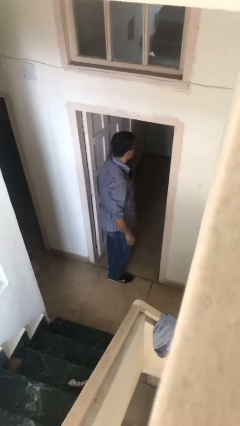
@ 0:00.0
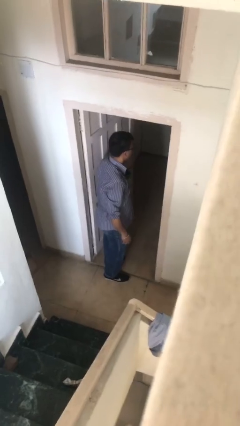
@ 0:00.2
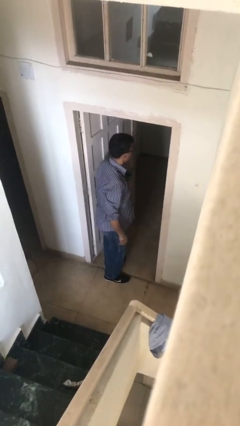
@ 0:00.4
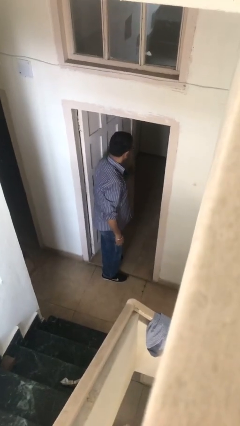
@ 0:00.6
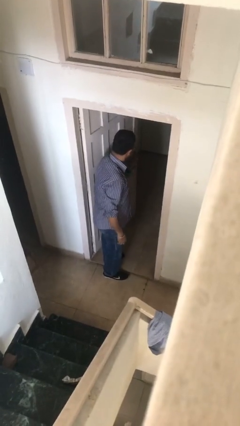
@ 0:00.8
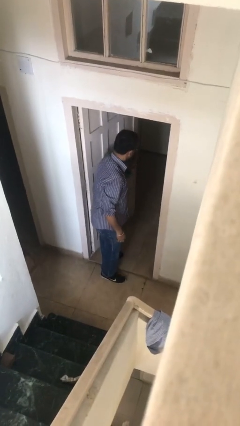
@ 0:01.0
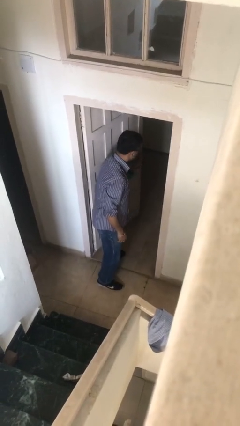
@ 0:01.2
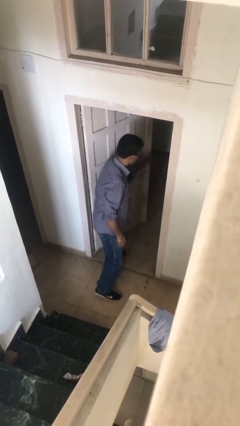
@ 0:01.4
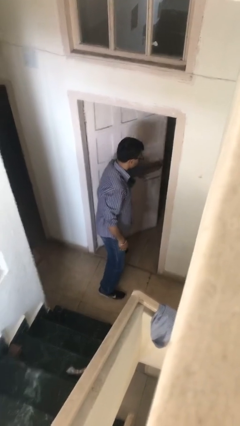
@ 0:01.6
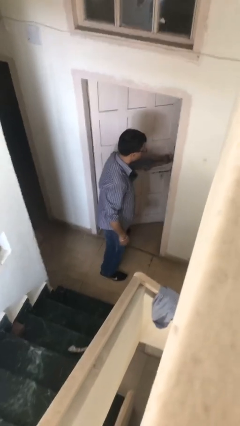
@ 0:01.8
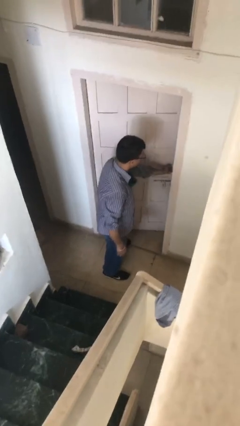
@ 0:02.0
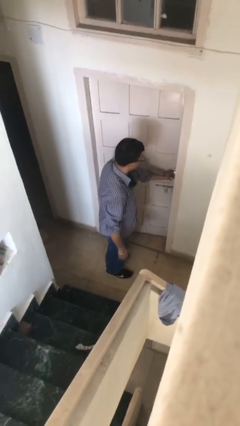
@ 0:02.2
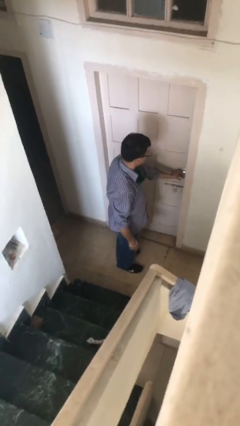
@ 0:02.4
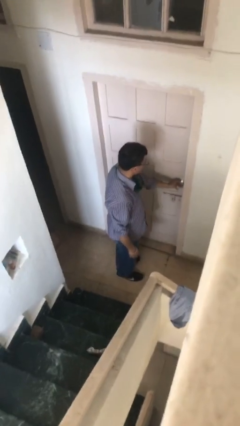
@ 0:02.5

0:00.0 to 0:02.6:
person closes facility door

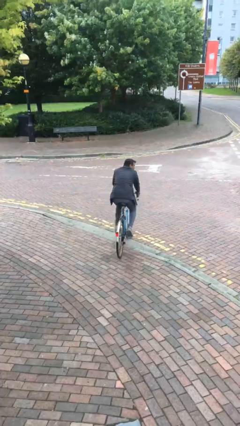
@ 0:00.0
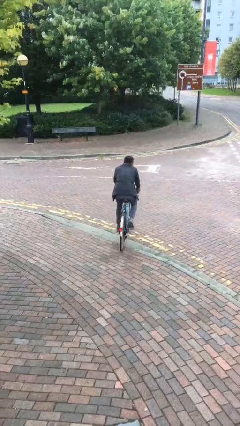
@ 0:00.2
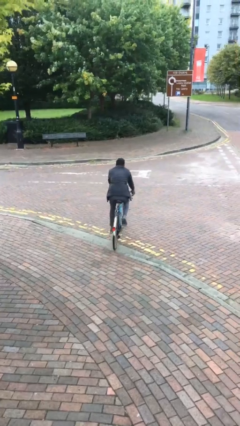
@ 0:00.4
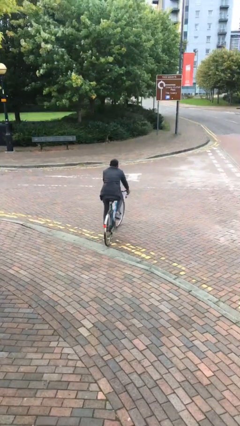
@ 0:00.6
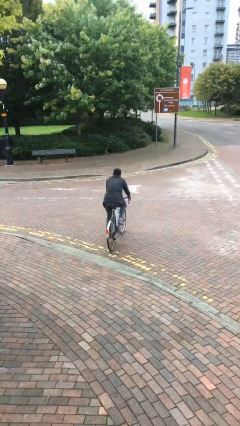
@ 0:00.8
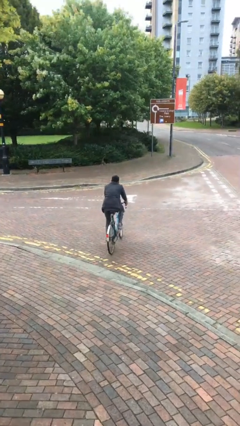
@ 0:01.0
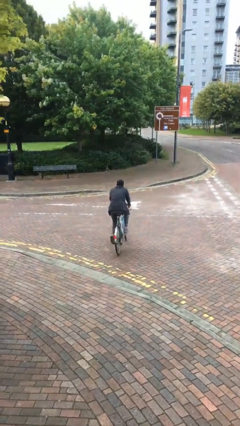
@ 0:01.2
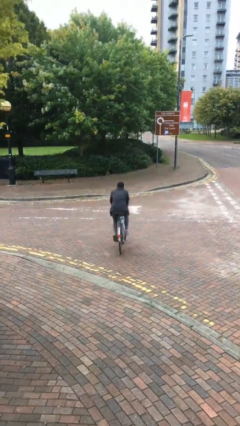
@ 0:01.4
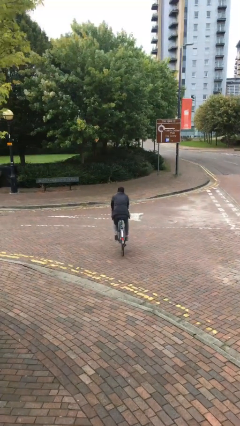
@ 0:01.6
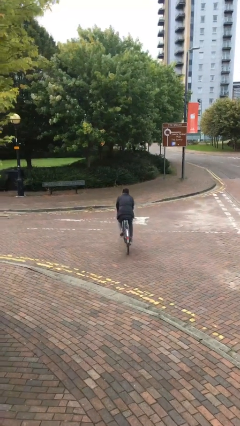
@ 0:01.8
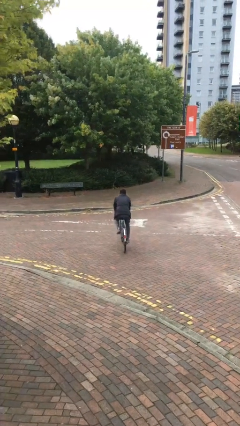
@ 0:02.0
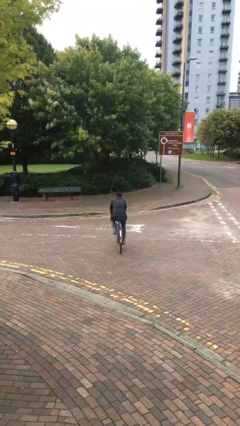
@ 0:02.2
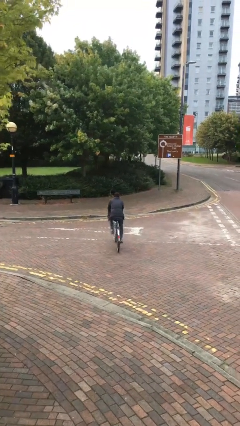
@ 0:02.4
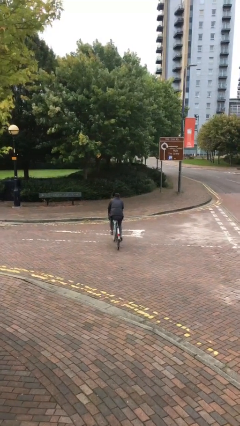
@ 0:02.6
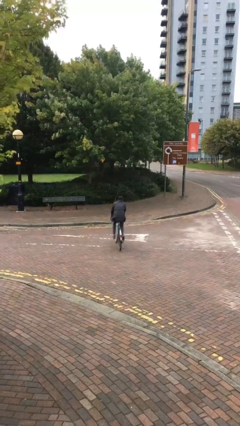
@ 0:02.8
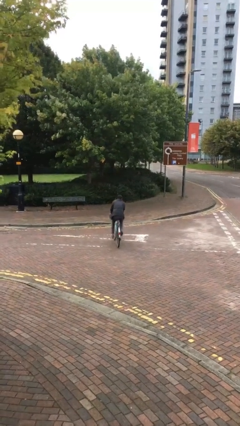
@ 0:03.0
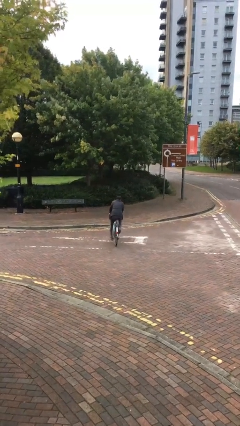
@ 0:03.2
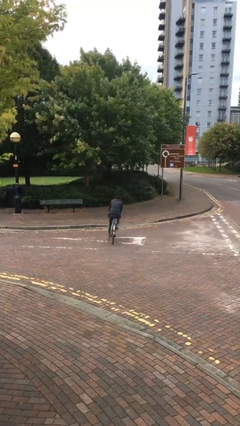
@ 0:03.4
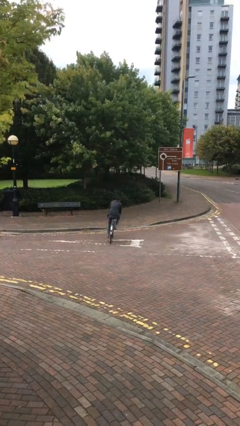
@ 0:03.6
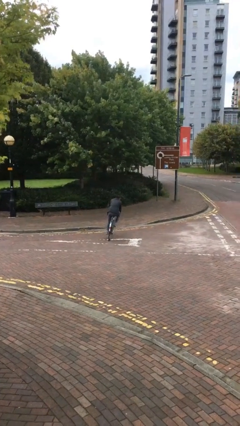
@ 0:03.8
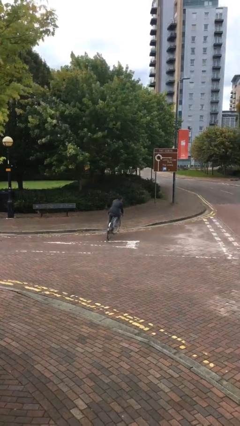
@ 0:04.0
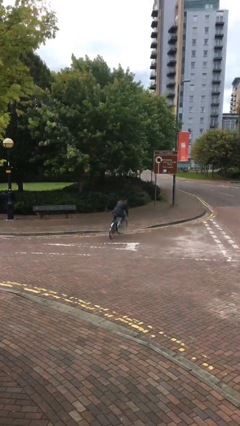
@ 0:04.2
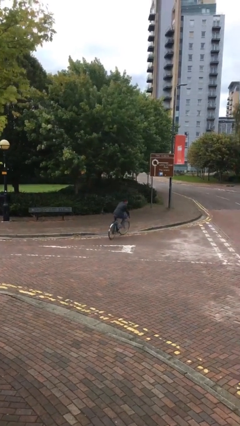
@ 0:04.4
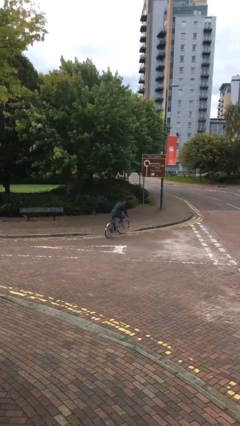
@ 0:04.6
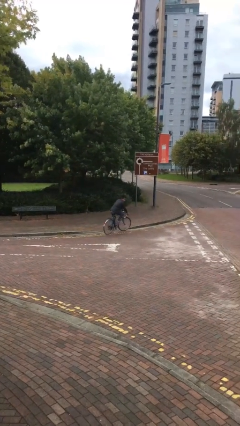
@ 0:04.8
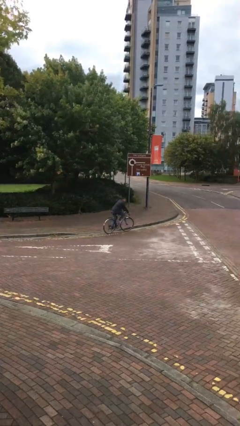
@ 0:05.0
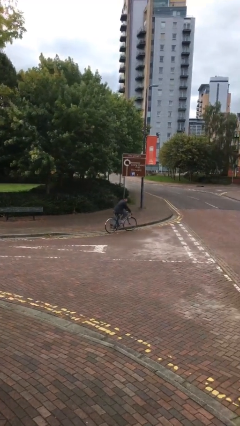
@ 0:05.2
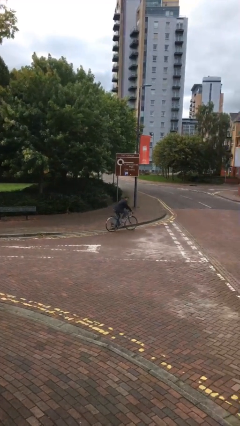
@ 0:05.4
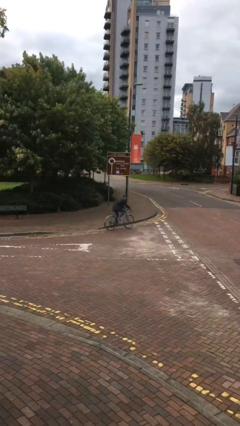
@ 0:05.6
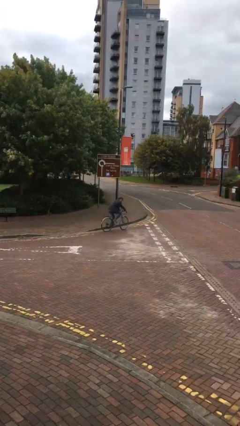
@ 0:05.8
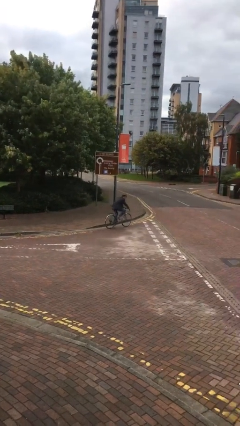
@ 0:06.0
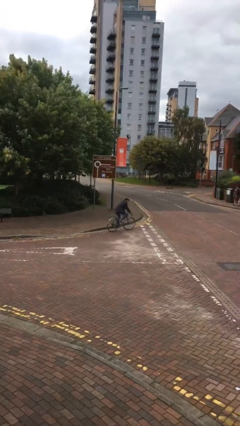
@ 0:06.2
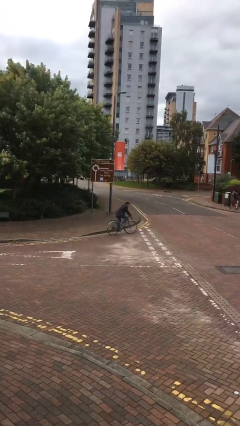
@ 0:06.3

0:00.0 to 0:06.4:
person rides bicycle

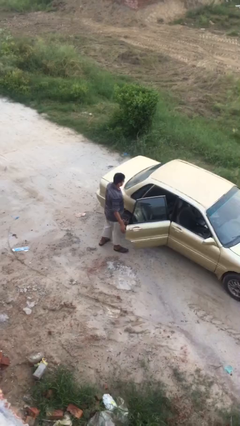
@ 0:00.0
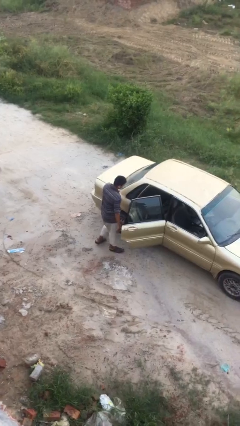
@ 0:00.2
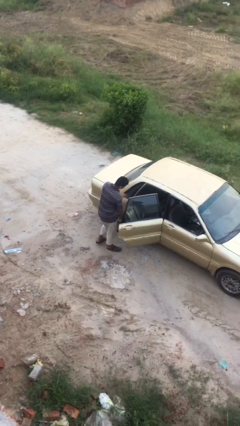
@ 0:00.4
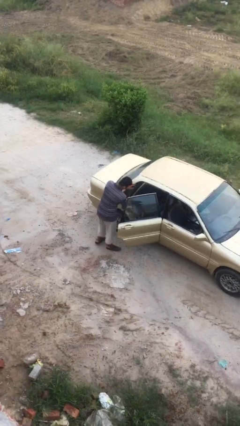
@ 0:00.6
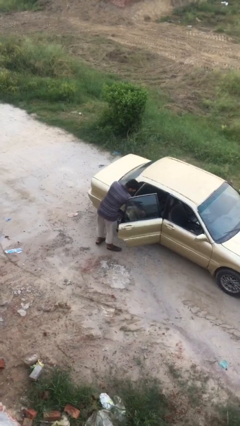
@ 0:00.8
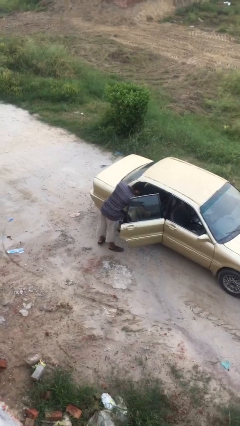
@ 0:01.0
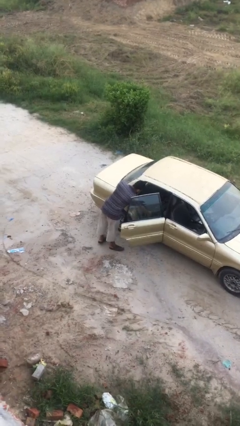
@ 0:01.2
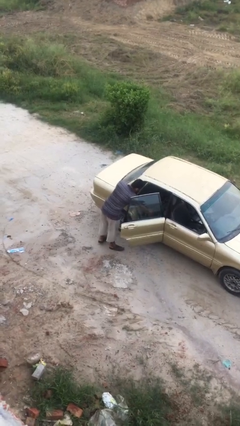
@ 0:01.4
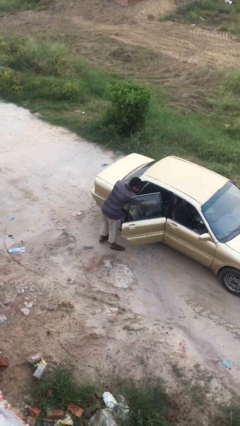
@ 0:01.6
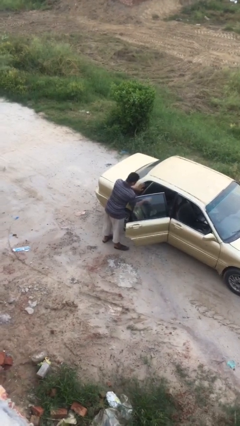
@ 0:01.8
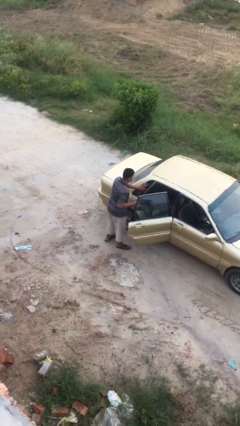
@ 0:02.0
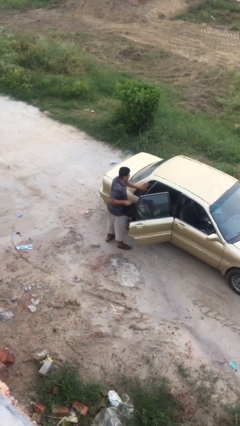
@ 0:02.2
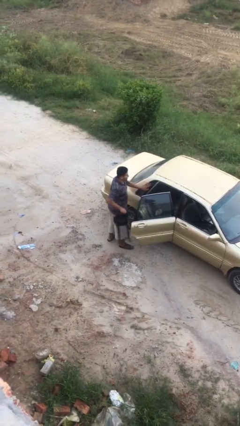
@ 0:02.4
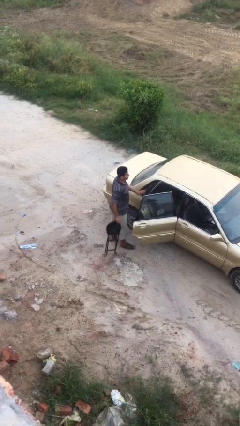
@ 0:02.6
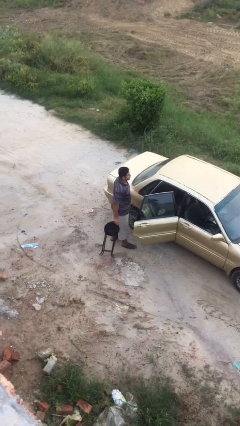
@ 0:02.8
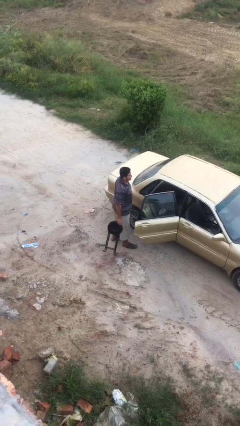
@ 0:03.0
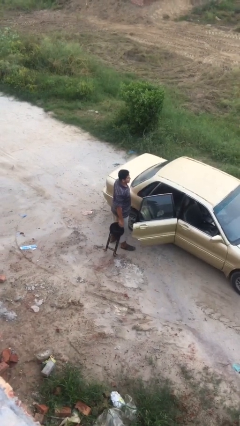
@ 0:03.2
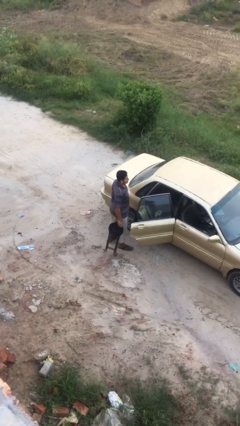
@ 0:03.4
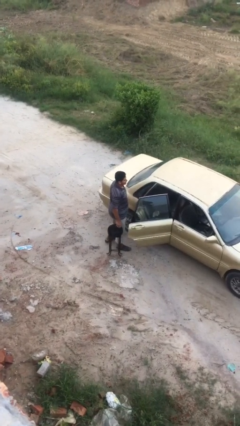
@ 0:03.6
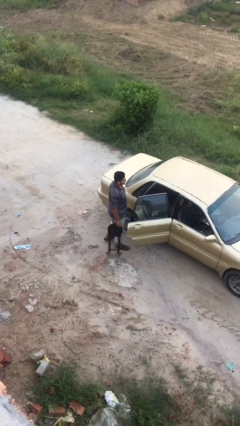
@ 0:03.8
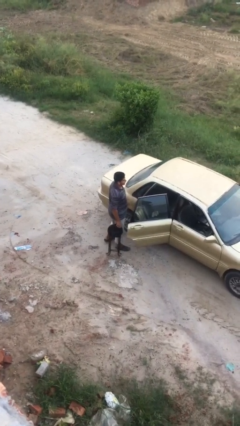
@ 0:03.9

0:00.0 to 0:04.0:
person unloads car

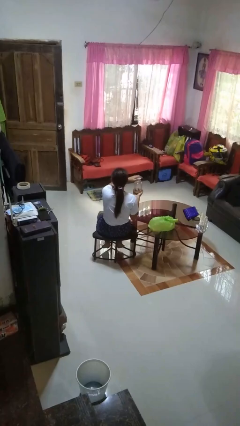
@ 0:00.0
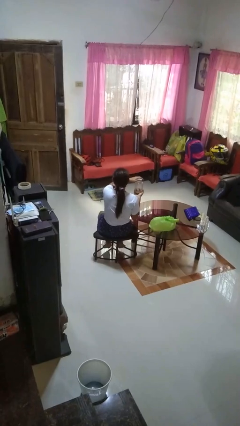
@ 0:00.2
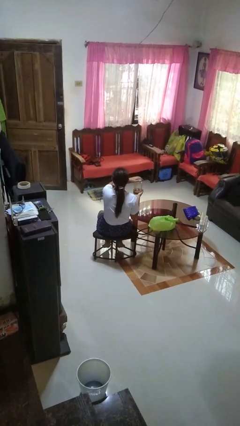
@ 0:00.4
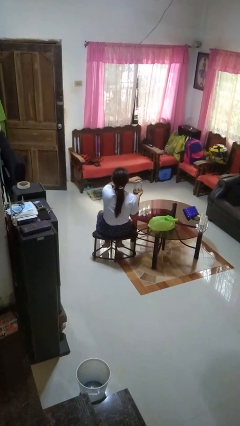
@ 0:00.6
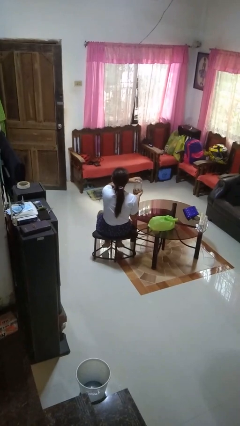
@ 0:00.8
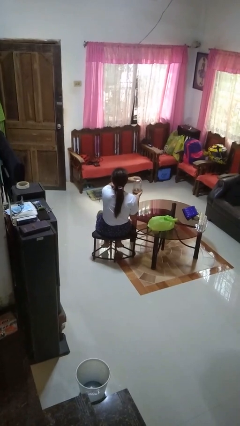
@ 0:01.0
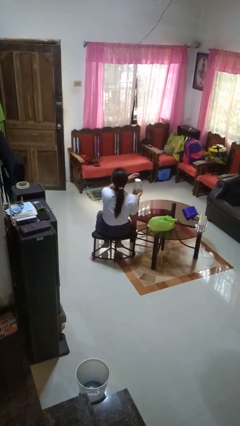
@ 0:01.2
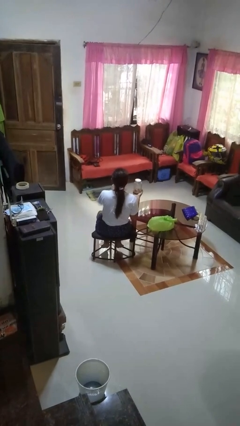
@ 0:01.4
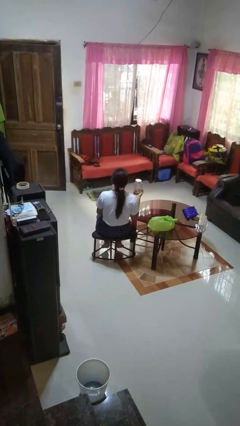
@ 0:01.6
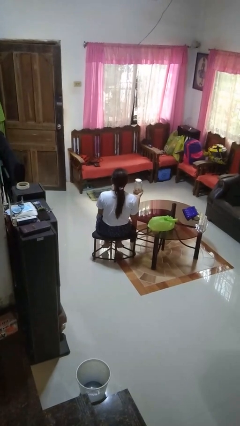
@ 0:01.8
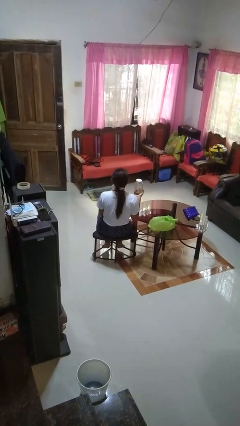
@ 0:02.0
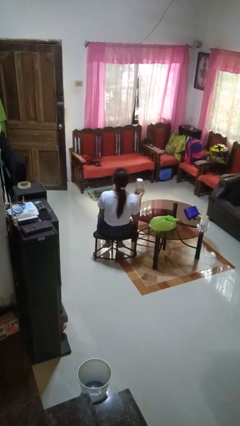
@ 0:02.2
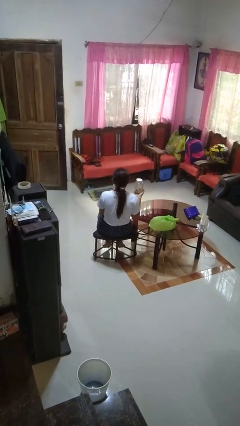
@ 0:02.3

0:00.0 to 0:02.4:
person closes jar

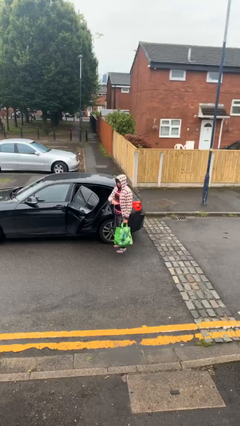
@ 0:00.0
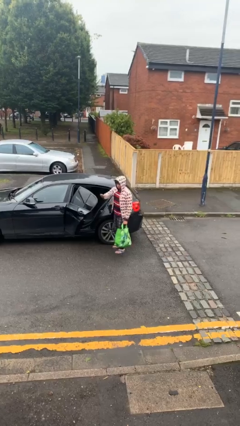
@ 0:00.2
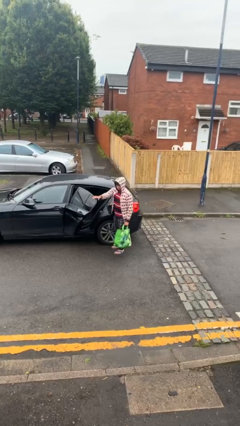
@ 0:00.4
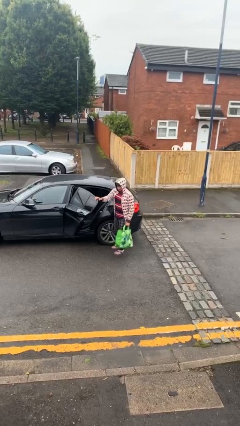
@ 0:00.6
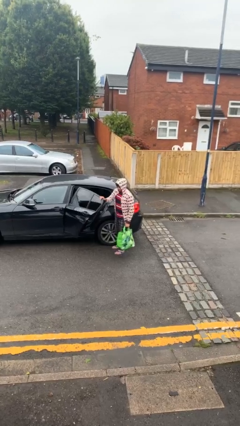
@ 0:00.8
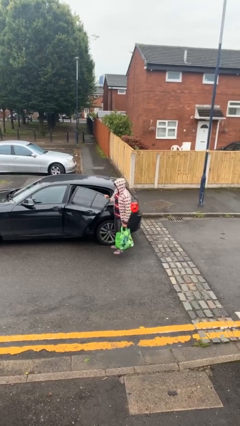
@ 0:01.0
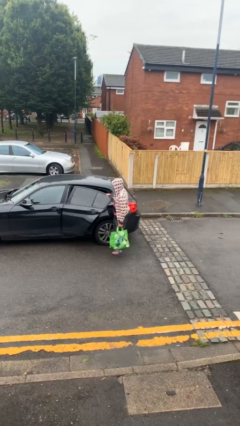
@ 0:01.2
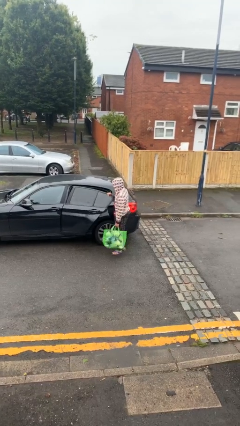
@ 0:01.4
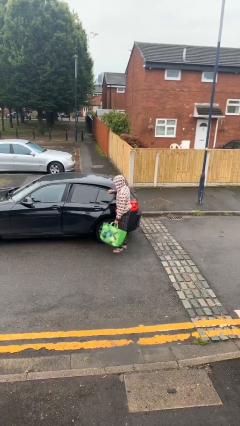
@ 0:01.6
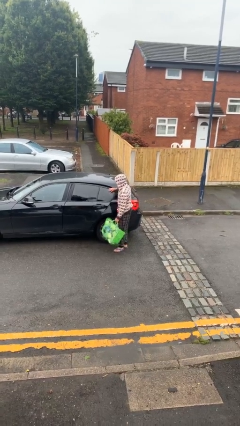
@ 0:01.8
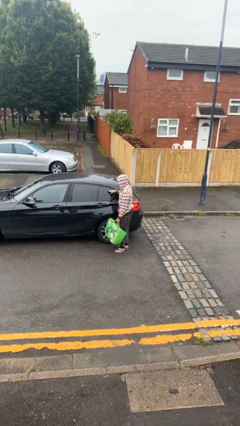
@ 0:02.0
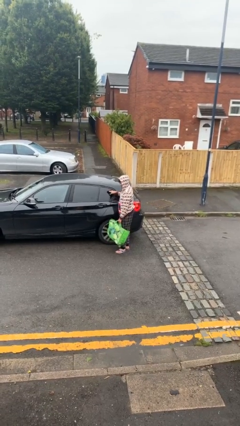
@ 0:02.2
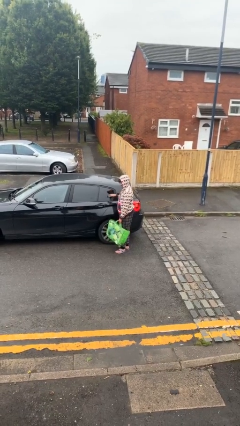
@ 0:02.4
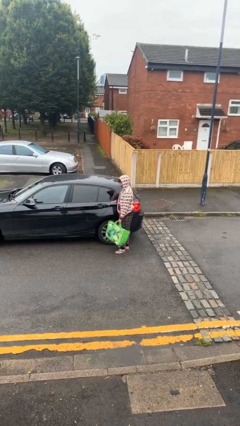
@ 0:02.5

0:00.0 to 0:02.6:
person closes car door
